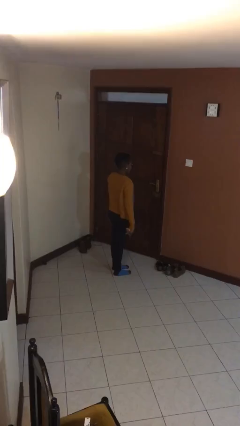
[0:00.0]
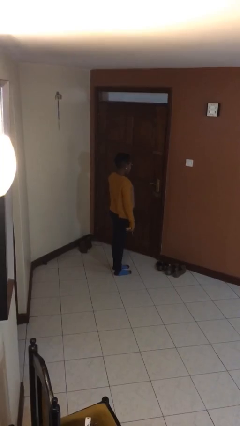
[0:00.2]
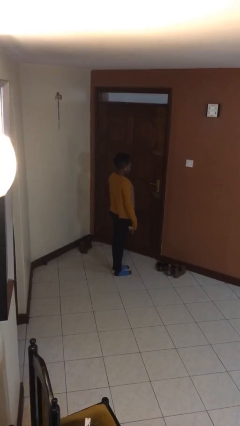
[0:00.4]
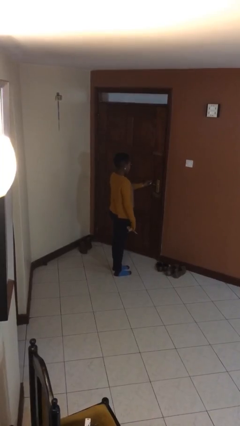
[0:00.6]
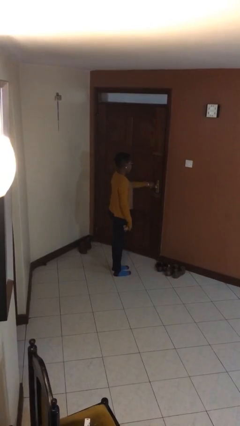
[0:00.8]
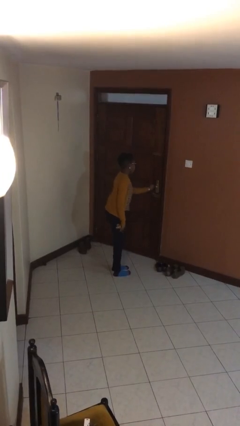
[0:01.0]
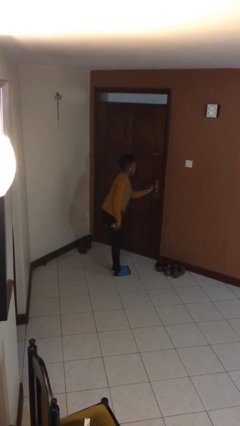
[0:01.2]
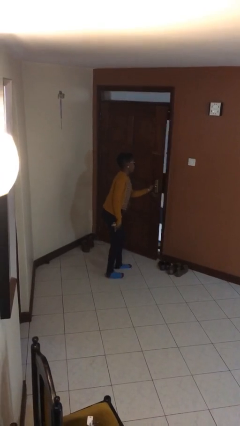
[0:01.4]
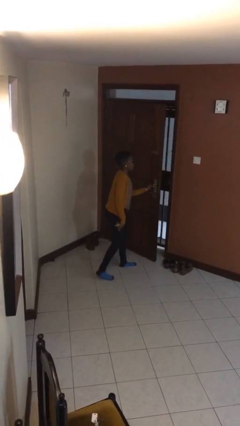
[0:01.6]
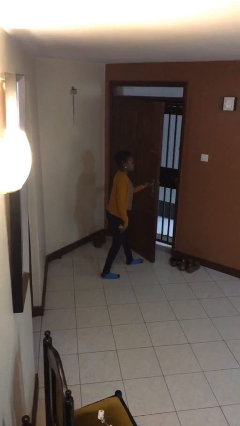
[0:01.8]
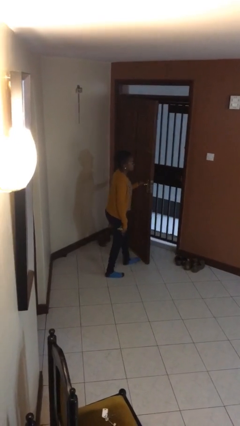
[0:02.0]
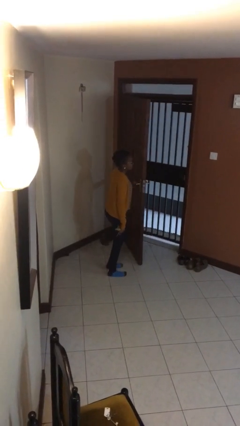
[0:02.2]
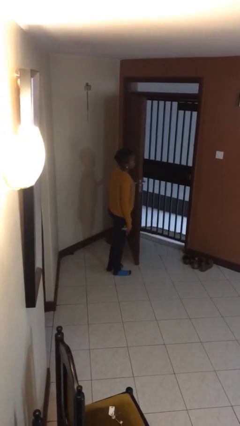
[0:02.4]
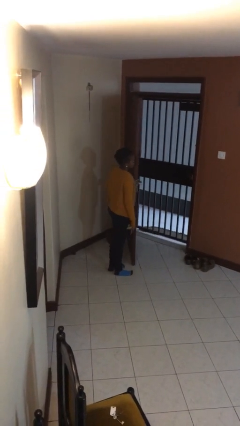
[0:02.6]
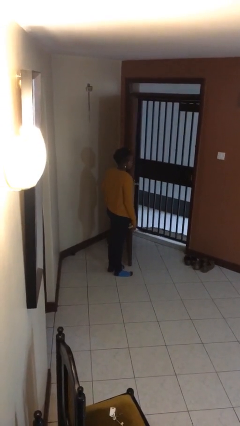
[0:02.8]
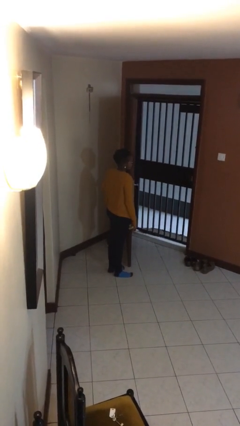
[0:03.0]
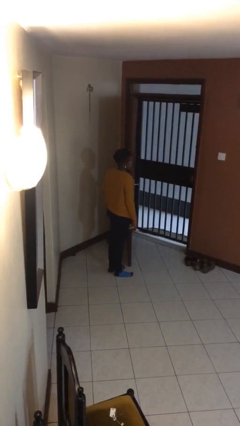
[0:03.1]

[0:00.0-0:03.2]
person opens facility door

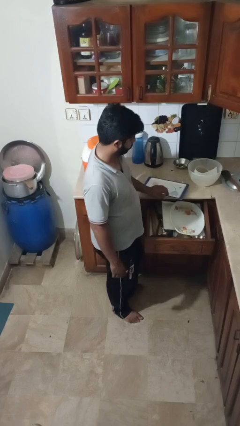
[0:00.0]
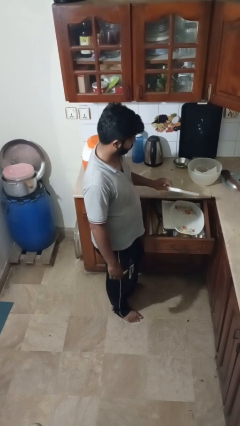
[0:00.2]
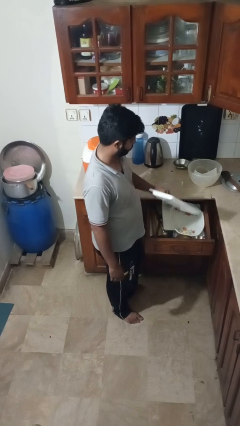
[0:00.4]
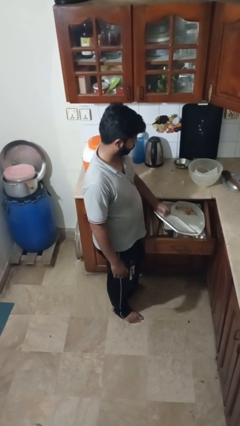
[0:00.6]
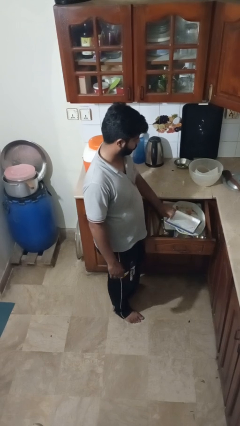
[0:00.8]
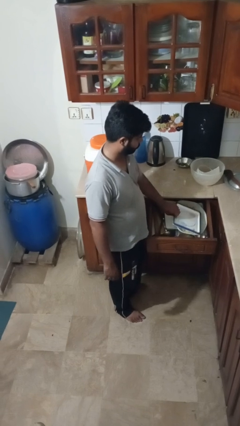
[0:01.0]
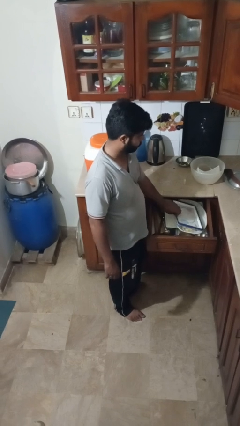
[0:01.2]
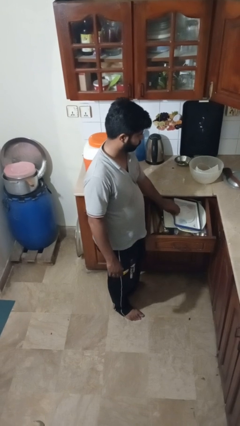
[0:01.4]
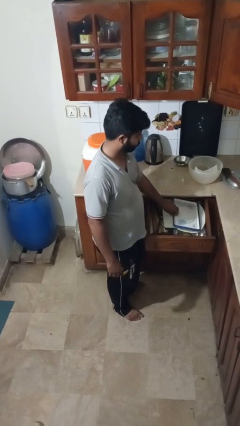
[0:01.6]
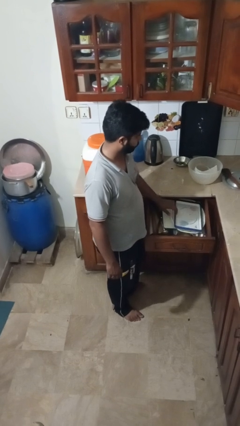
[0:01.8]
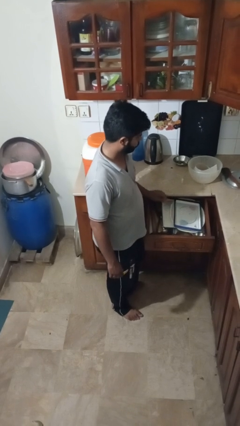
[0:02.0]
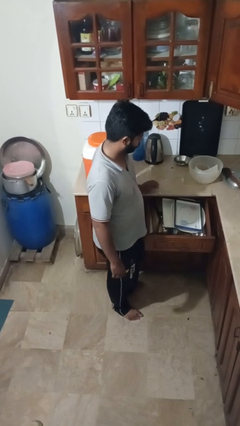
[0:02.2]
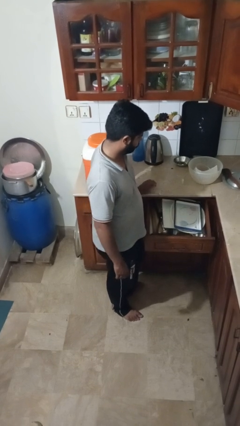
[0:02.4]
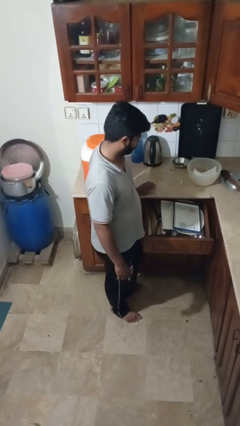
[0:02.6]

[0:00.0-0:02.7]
person puts object into kitchen drawer

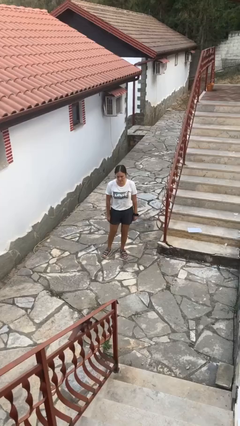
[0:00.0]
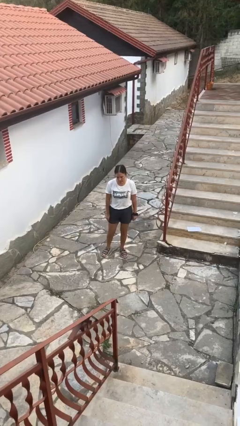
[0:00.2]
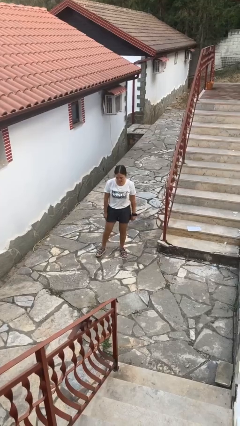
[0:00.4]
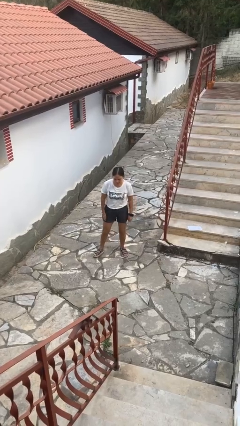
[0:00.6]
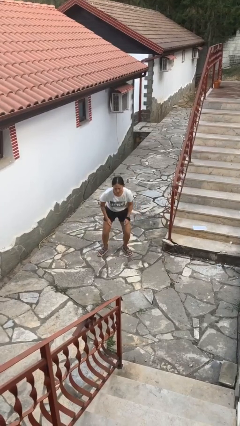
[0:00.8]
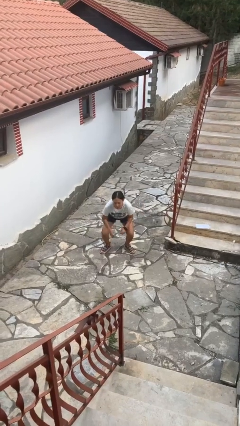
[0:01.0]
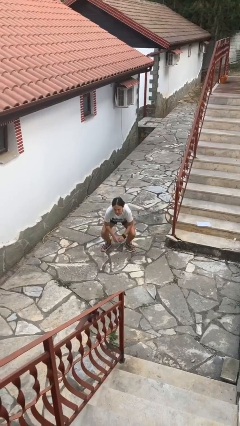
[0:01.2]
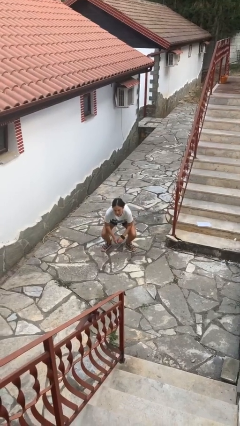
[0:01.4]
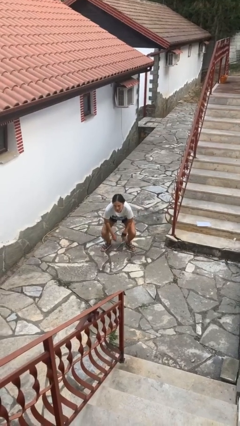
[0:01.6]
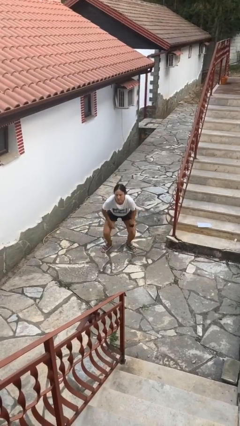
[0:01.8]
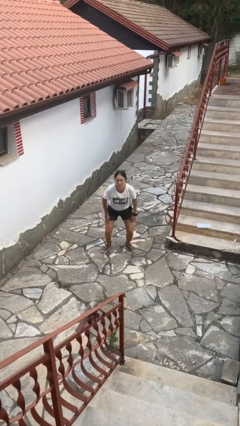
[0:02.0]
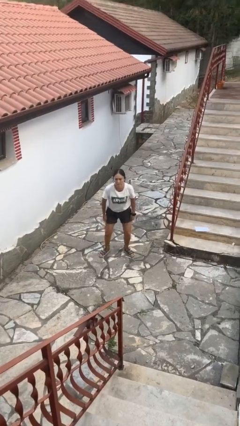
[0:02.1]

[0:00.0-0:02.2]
person squats

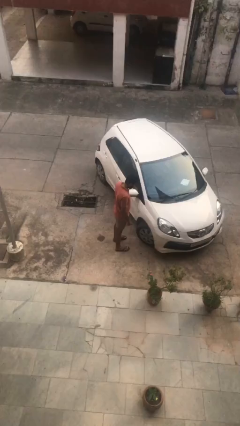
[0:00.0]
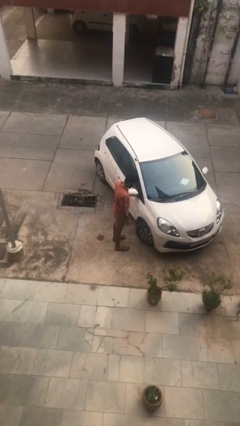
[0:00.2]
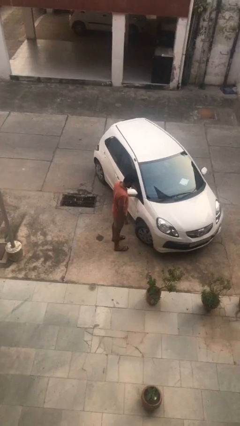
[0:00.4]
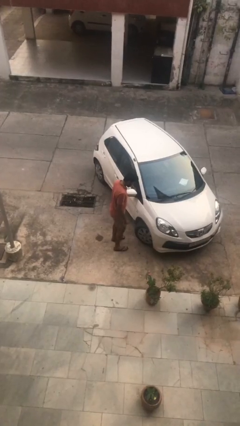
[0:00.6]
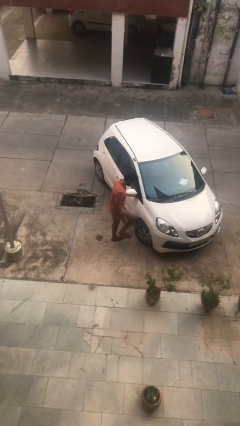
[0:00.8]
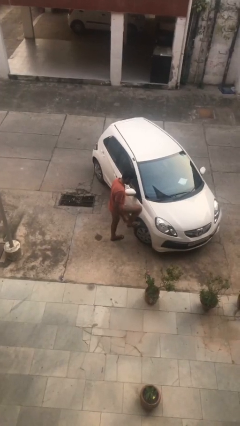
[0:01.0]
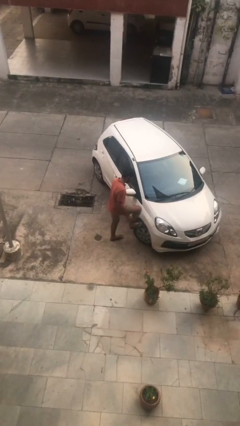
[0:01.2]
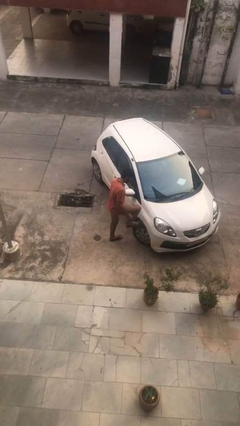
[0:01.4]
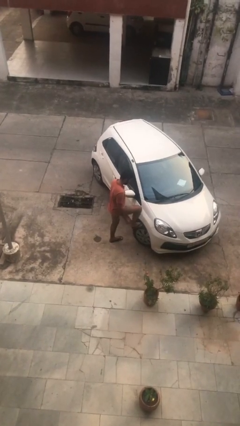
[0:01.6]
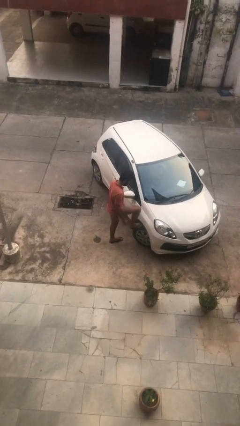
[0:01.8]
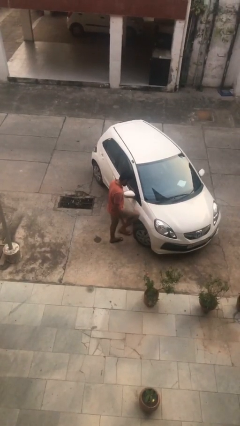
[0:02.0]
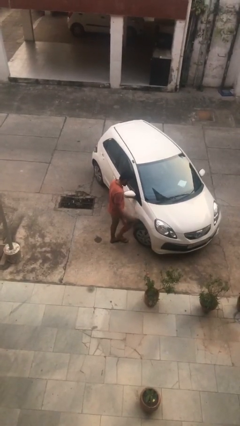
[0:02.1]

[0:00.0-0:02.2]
person kicks car tires

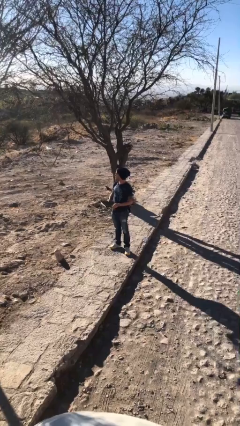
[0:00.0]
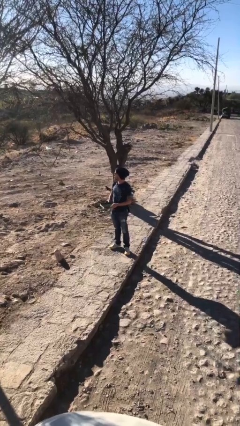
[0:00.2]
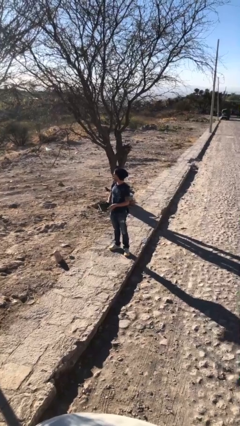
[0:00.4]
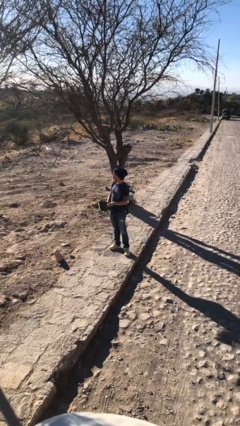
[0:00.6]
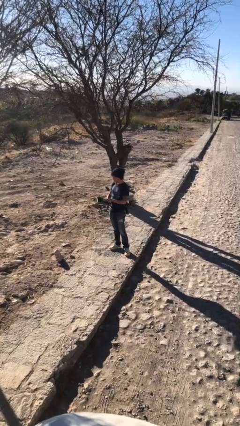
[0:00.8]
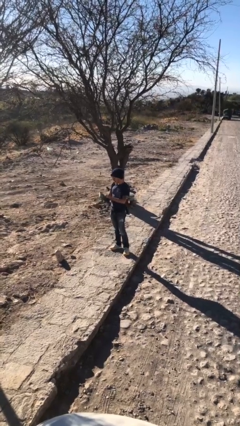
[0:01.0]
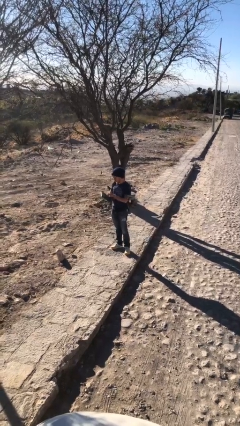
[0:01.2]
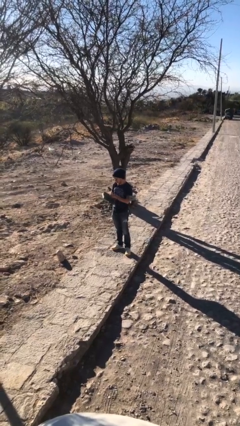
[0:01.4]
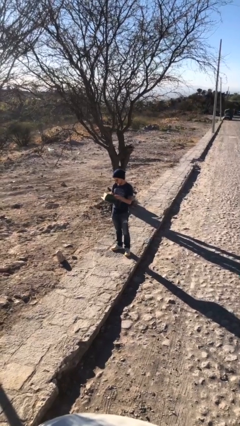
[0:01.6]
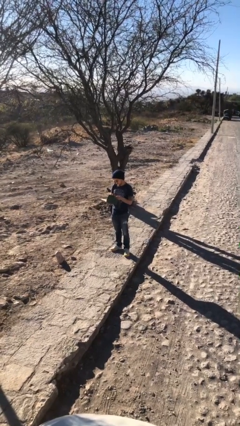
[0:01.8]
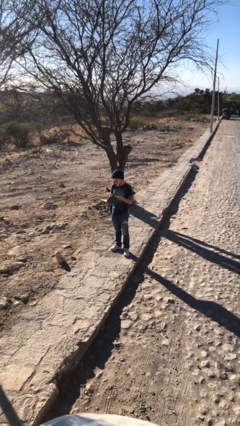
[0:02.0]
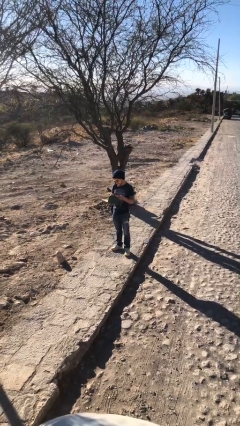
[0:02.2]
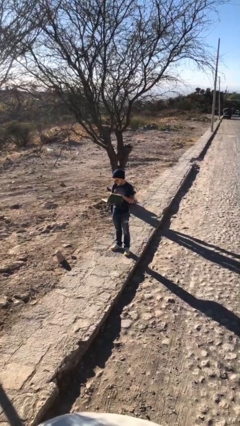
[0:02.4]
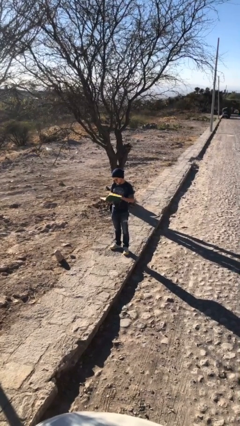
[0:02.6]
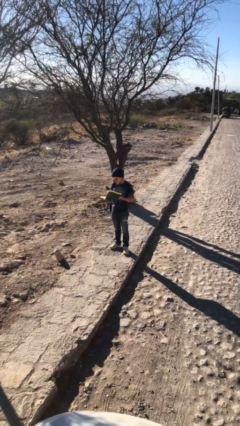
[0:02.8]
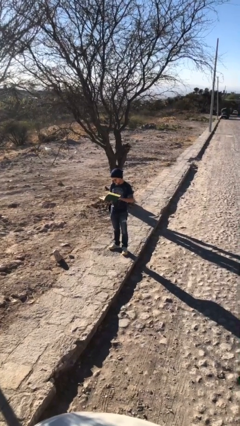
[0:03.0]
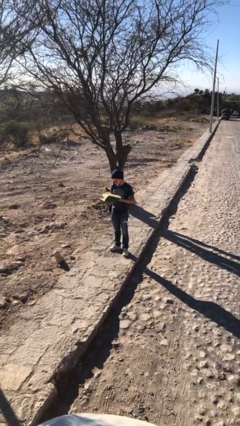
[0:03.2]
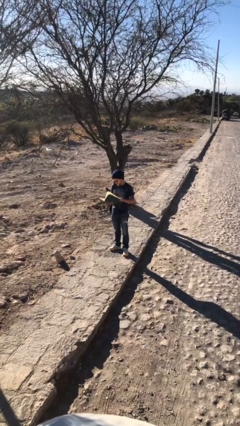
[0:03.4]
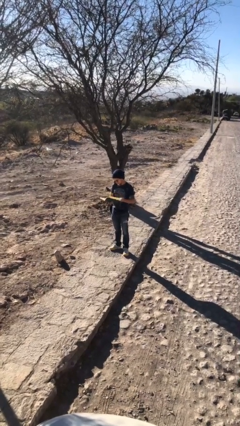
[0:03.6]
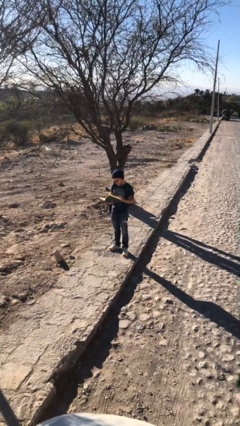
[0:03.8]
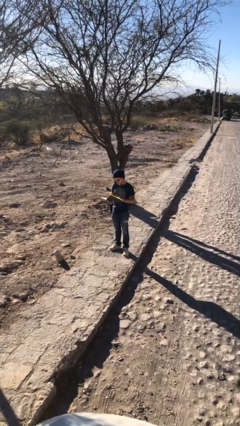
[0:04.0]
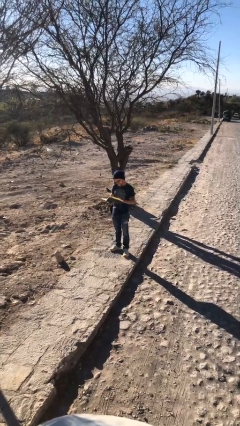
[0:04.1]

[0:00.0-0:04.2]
person reads document

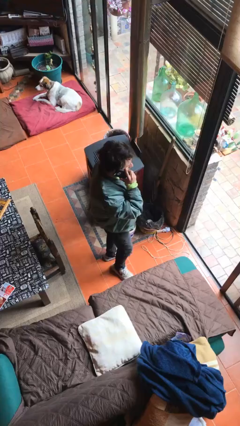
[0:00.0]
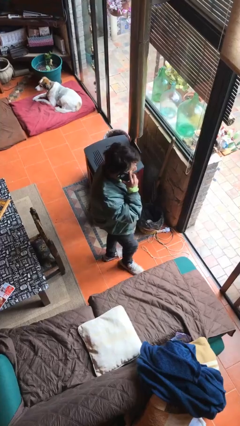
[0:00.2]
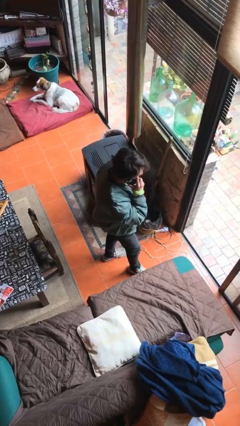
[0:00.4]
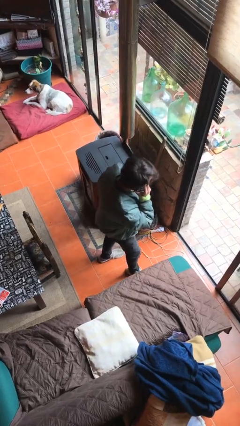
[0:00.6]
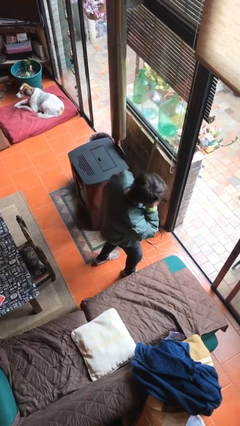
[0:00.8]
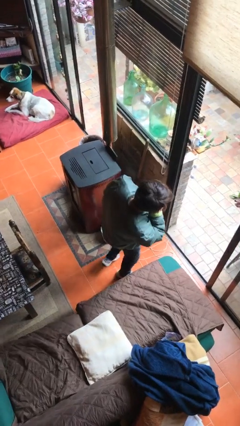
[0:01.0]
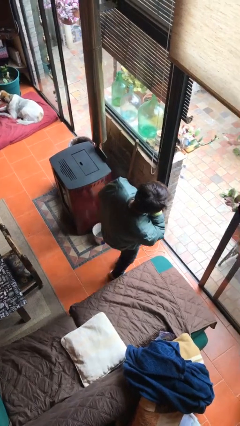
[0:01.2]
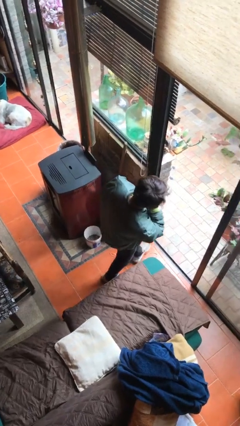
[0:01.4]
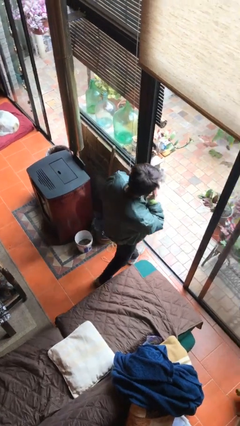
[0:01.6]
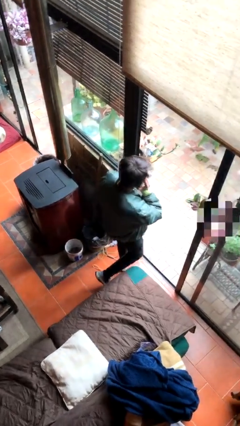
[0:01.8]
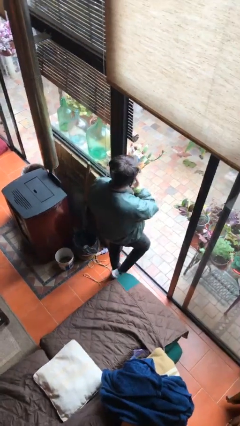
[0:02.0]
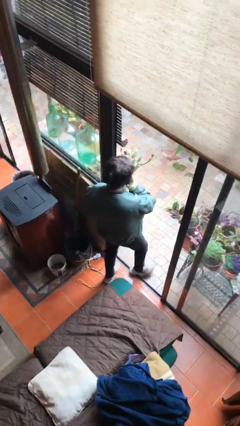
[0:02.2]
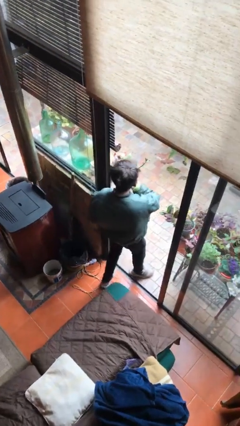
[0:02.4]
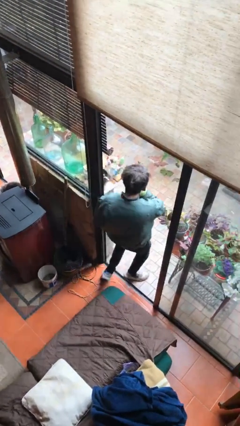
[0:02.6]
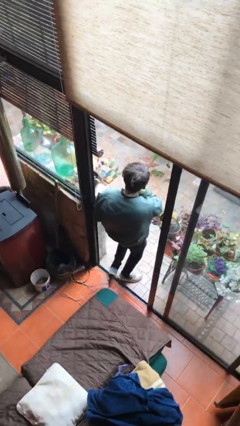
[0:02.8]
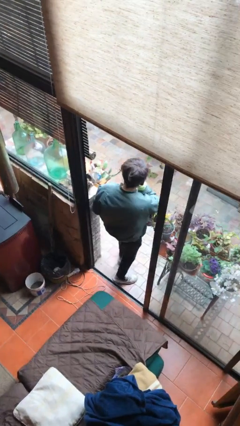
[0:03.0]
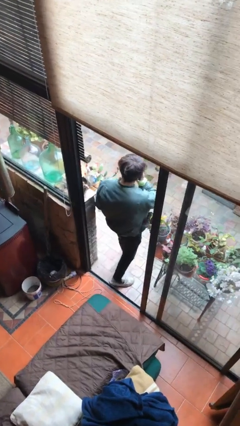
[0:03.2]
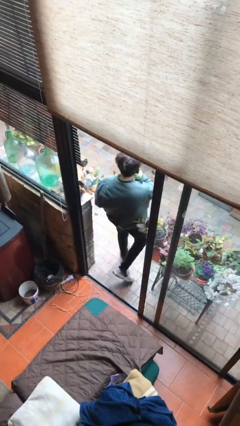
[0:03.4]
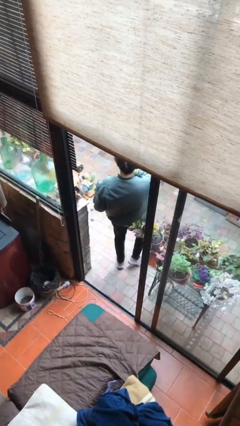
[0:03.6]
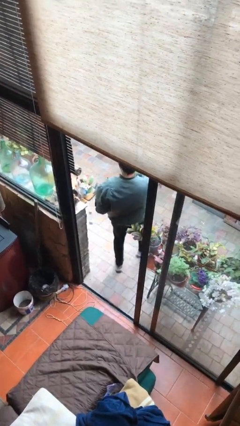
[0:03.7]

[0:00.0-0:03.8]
person exits scene through structure
